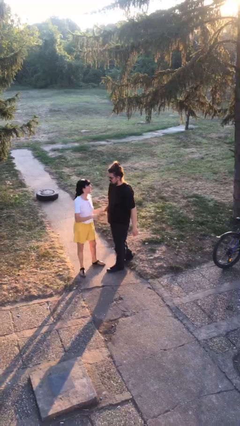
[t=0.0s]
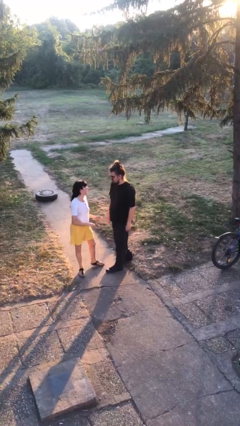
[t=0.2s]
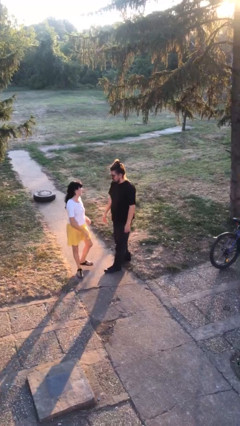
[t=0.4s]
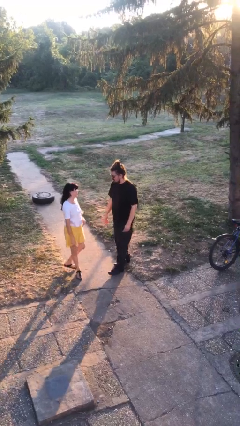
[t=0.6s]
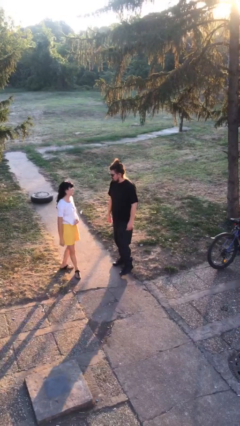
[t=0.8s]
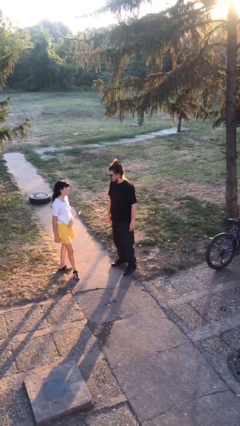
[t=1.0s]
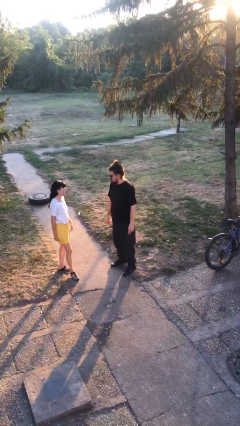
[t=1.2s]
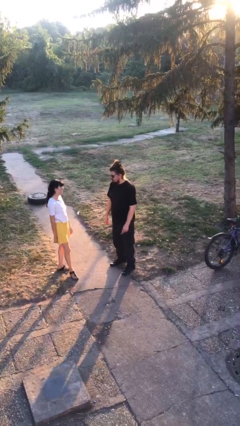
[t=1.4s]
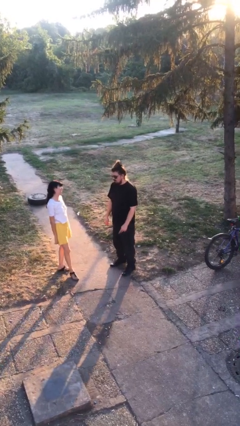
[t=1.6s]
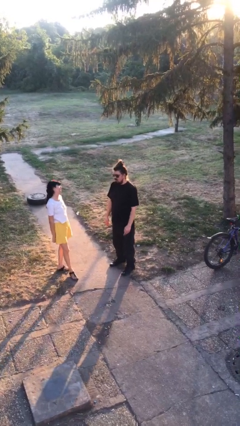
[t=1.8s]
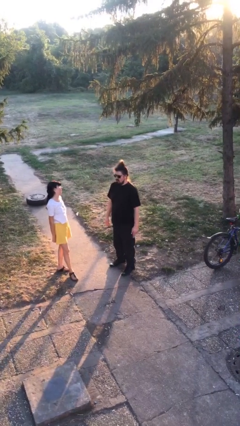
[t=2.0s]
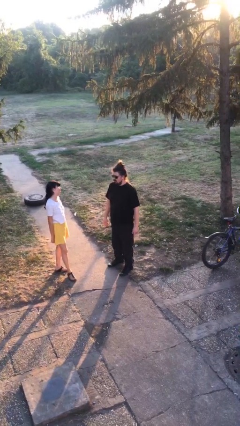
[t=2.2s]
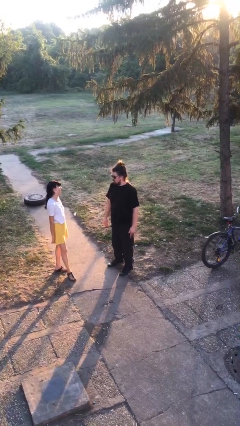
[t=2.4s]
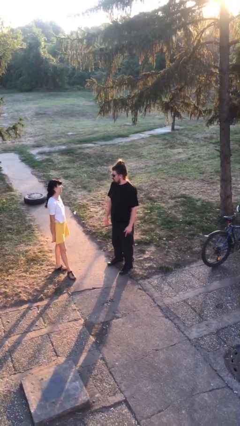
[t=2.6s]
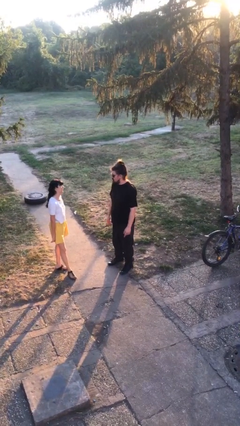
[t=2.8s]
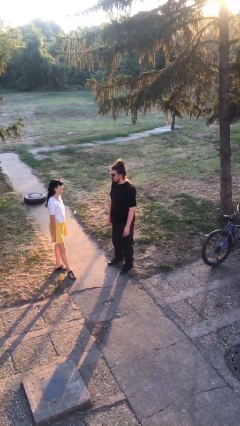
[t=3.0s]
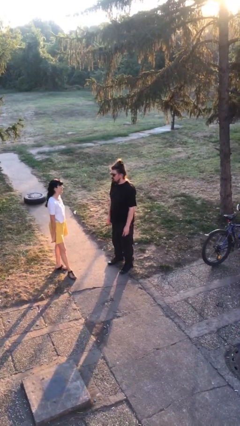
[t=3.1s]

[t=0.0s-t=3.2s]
person talks to person

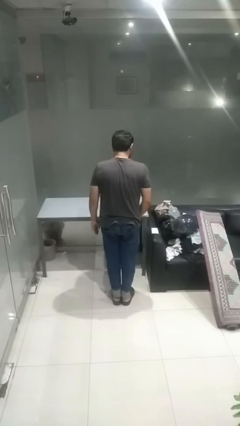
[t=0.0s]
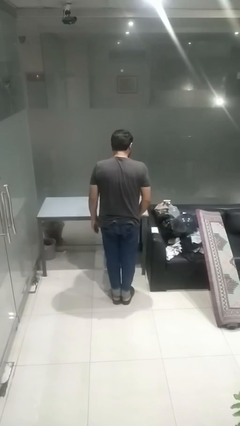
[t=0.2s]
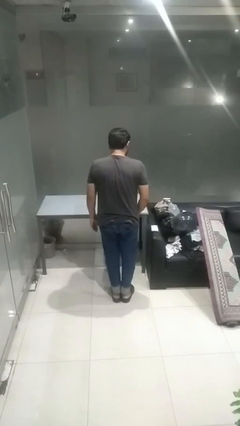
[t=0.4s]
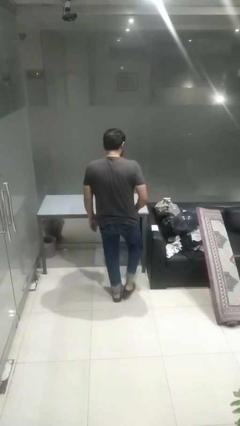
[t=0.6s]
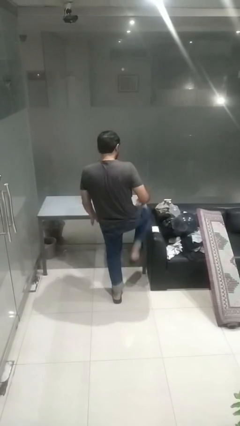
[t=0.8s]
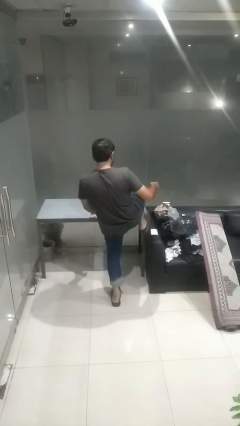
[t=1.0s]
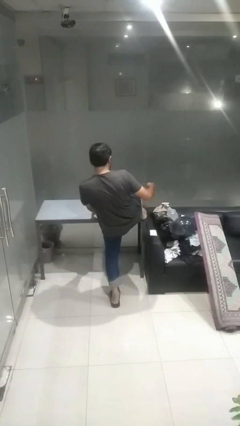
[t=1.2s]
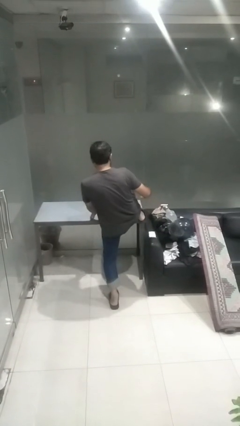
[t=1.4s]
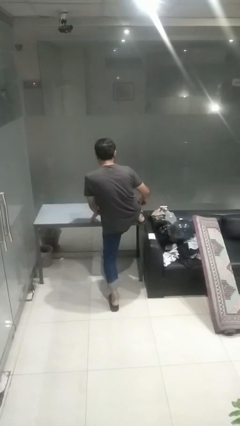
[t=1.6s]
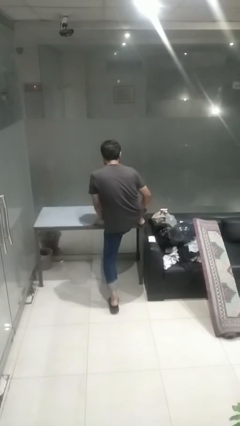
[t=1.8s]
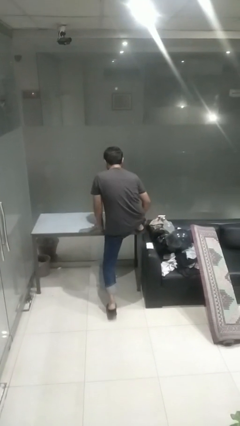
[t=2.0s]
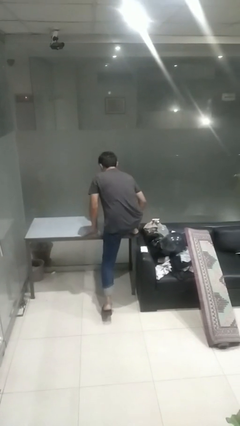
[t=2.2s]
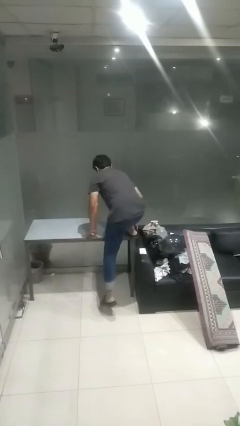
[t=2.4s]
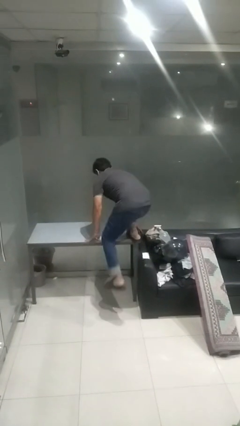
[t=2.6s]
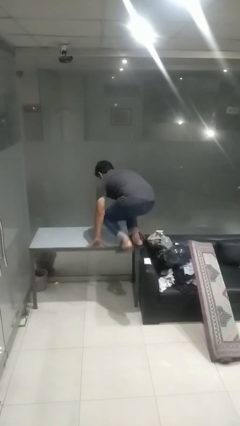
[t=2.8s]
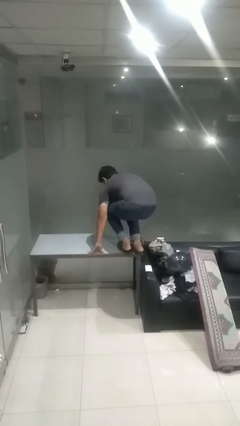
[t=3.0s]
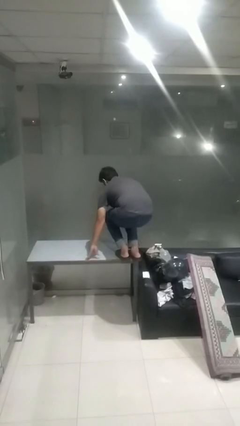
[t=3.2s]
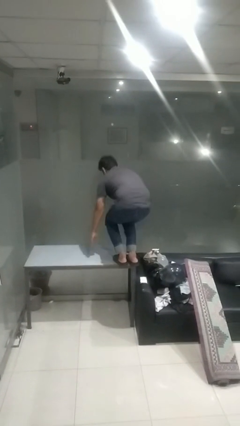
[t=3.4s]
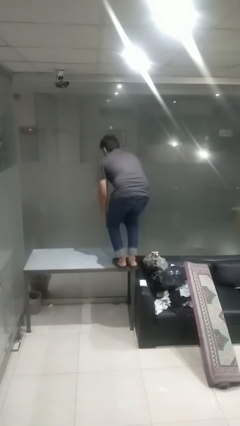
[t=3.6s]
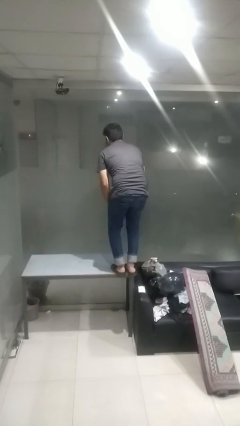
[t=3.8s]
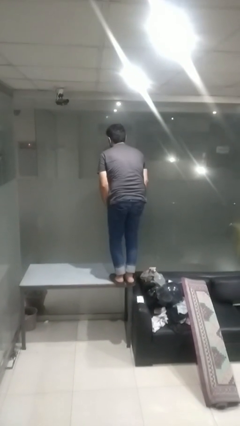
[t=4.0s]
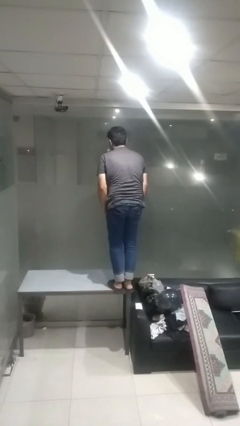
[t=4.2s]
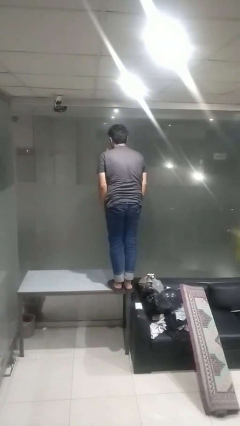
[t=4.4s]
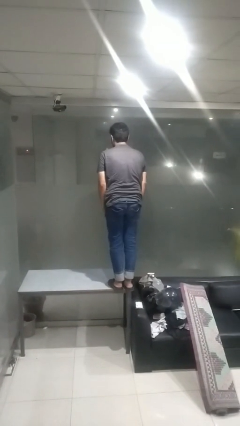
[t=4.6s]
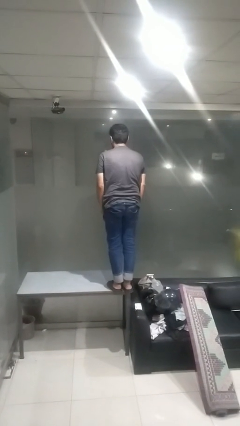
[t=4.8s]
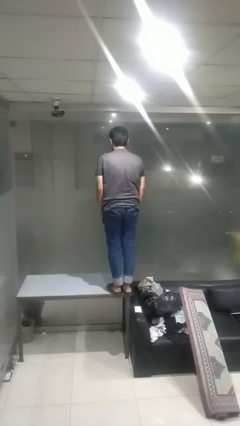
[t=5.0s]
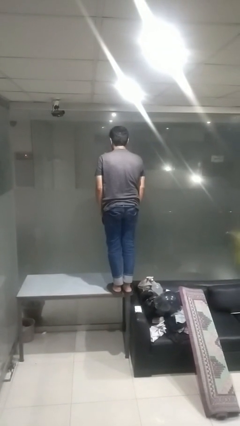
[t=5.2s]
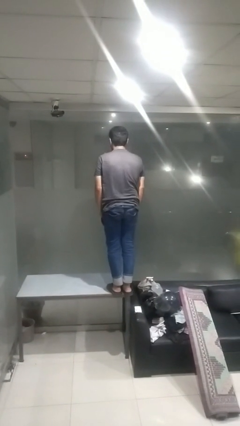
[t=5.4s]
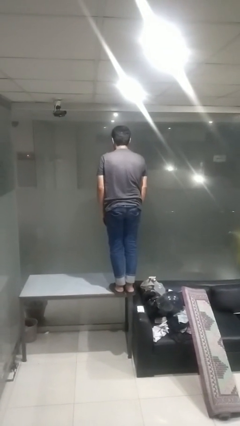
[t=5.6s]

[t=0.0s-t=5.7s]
person climbs on table

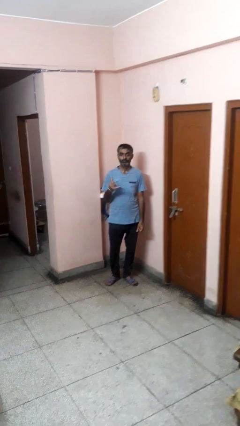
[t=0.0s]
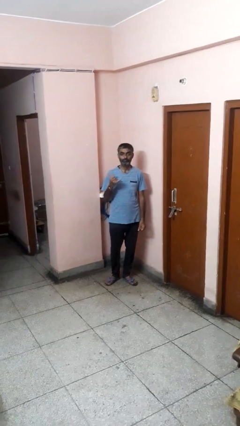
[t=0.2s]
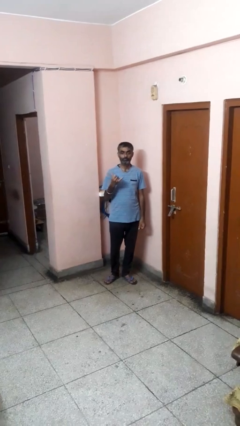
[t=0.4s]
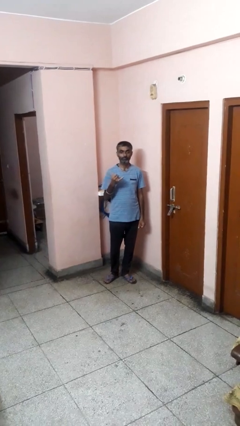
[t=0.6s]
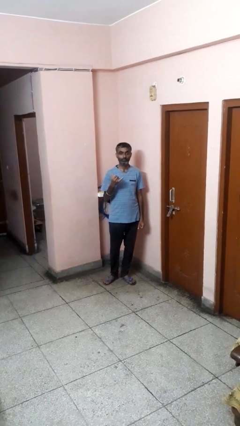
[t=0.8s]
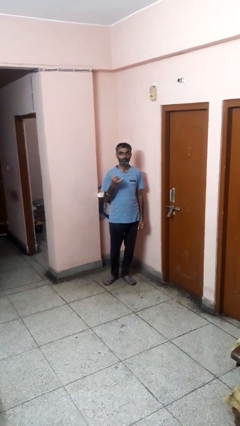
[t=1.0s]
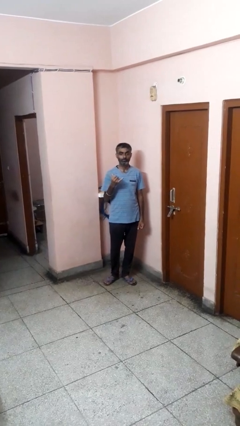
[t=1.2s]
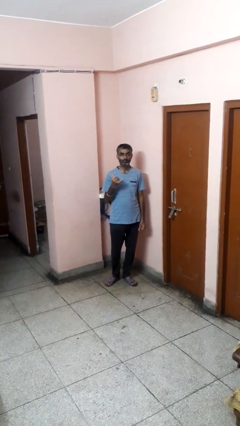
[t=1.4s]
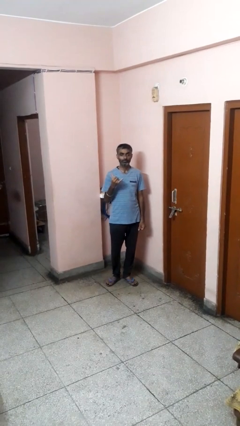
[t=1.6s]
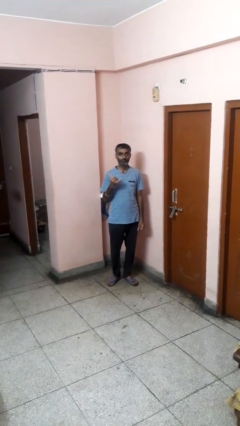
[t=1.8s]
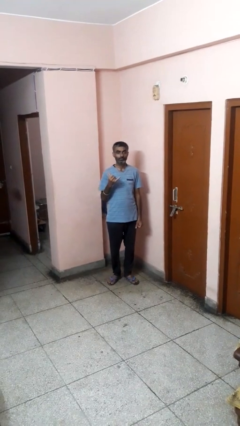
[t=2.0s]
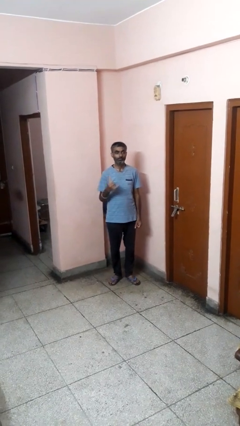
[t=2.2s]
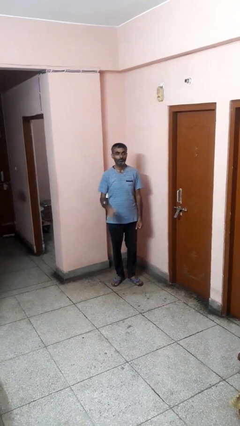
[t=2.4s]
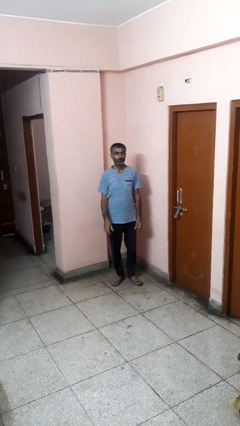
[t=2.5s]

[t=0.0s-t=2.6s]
person gestures hang loose

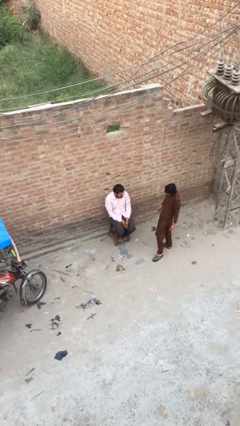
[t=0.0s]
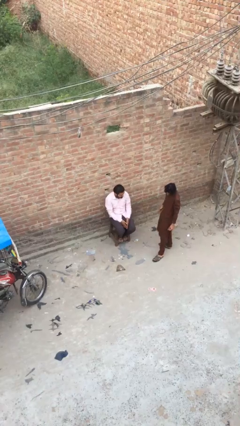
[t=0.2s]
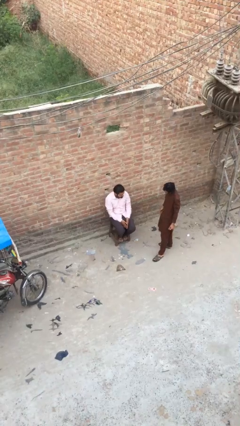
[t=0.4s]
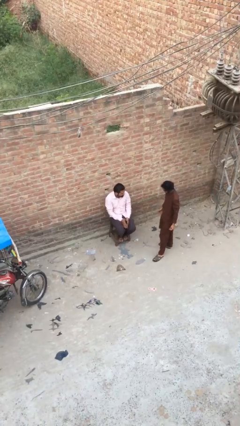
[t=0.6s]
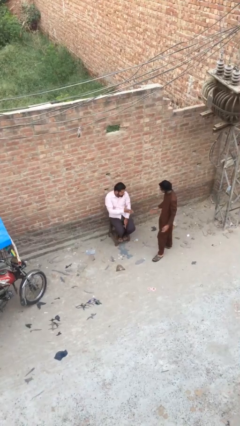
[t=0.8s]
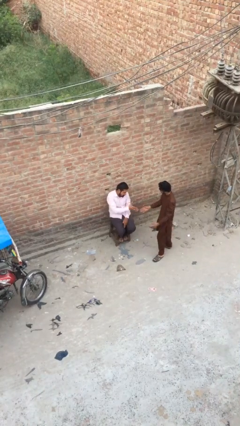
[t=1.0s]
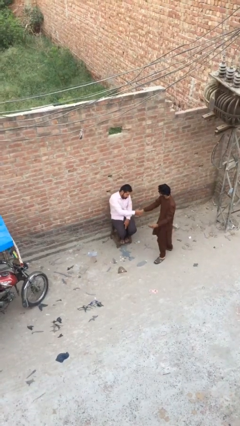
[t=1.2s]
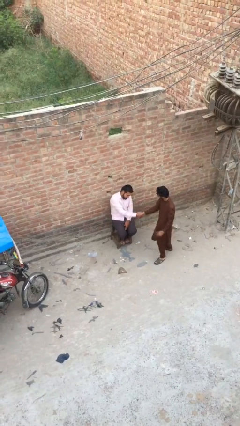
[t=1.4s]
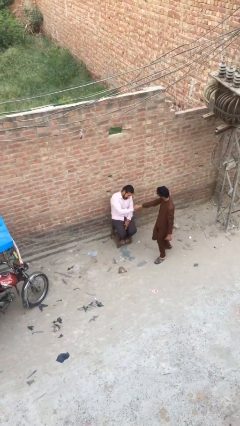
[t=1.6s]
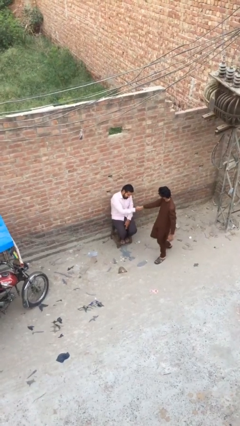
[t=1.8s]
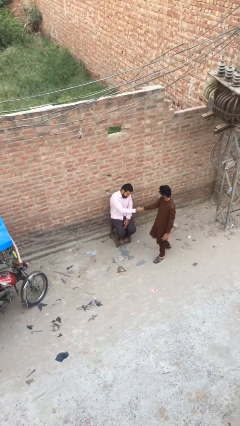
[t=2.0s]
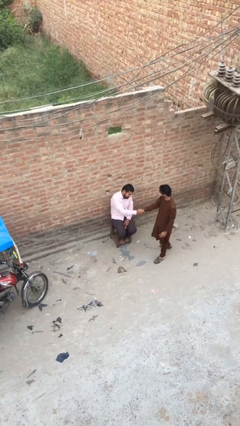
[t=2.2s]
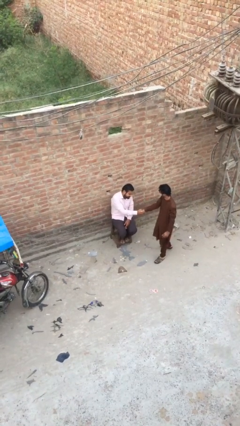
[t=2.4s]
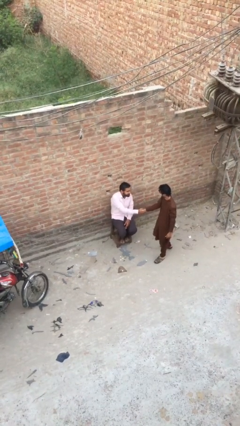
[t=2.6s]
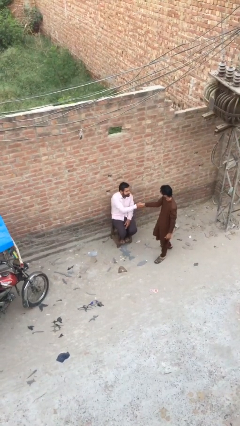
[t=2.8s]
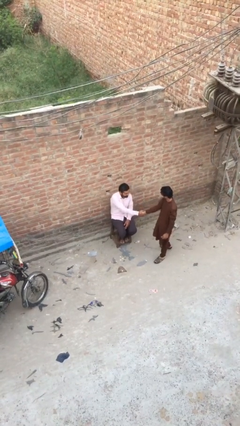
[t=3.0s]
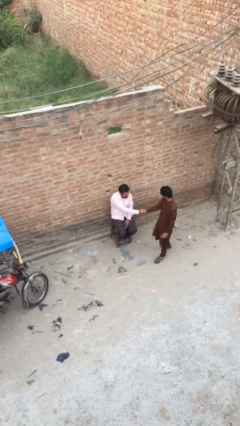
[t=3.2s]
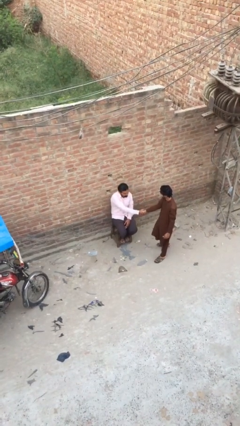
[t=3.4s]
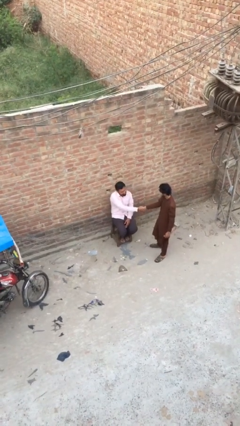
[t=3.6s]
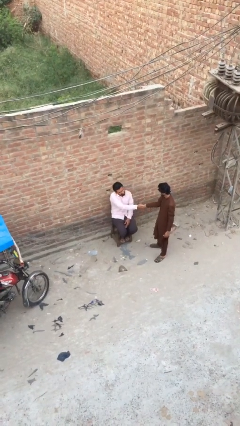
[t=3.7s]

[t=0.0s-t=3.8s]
person shakes hand

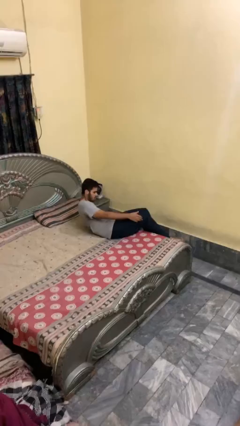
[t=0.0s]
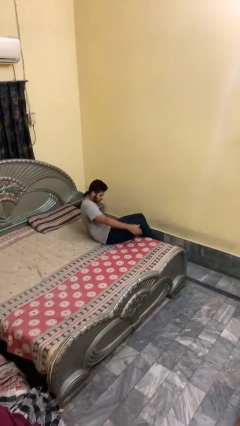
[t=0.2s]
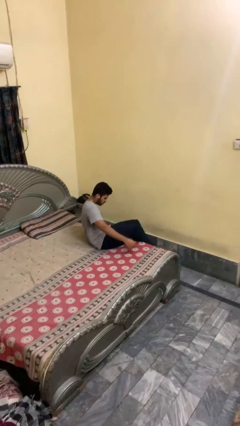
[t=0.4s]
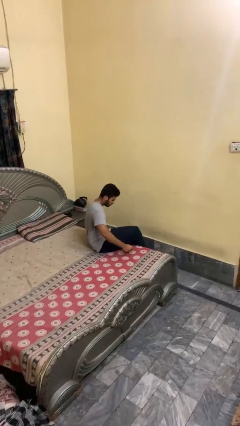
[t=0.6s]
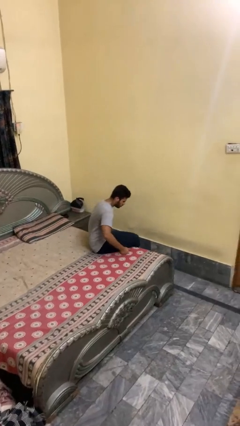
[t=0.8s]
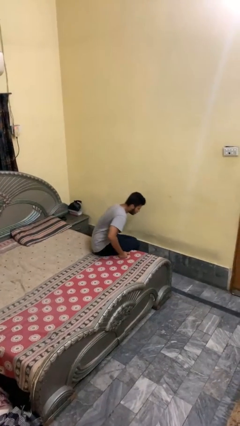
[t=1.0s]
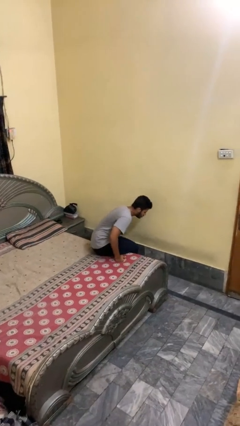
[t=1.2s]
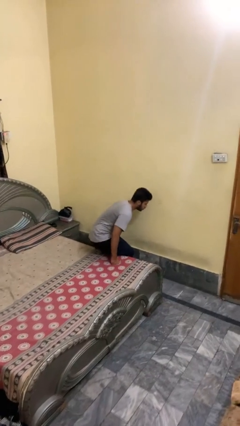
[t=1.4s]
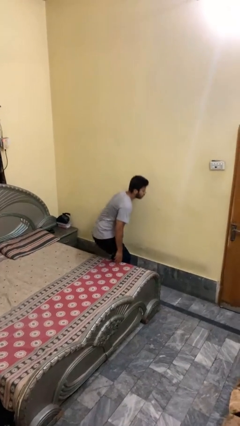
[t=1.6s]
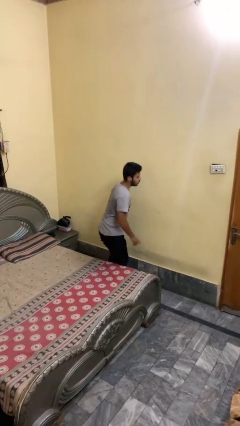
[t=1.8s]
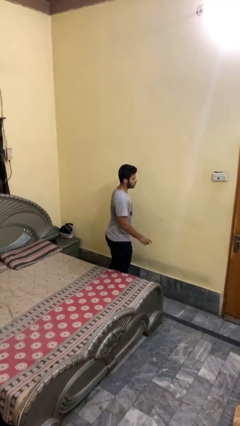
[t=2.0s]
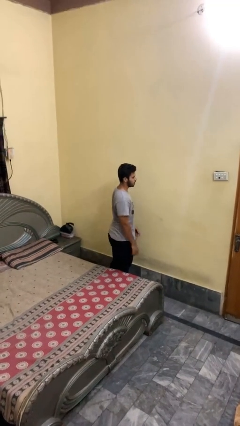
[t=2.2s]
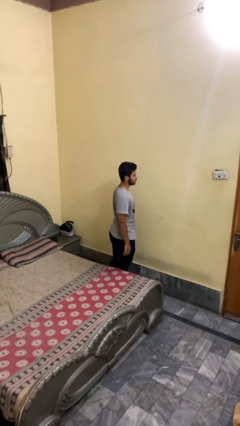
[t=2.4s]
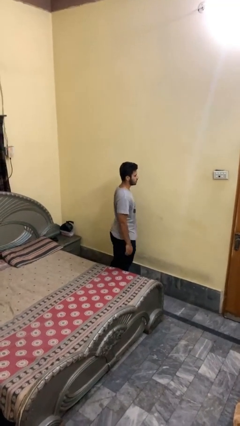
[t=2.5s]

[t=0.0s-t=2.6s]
person stands up
